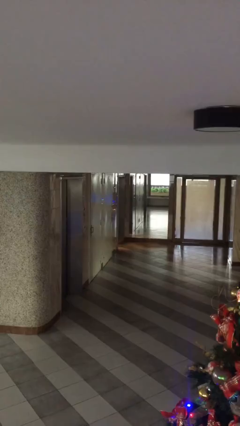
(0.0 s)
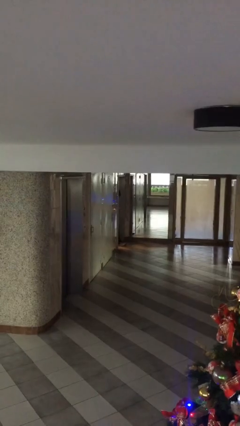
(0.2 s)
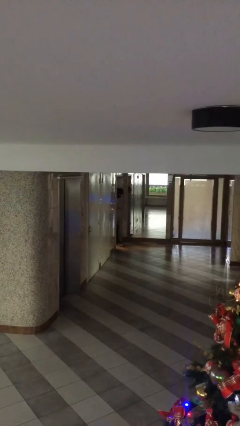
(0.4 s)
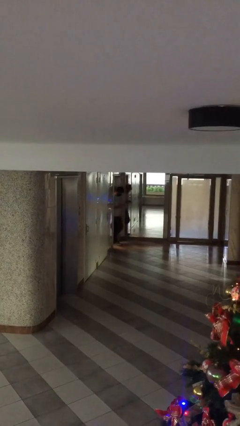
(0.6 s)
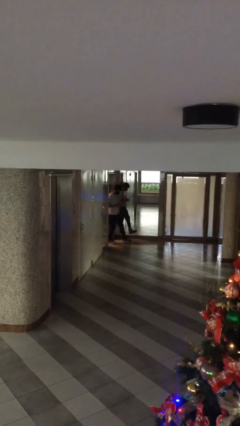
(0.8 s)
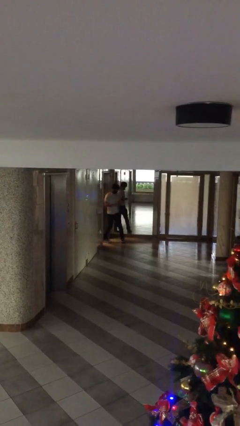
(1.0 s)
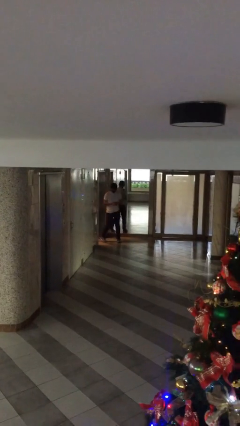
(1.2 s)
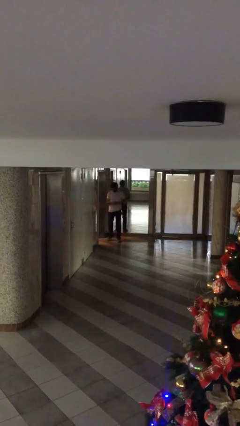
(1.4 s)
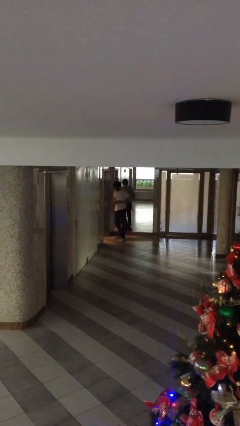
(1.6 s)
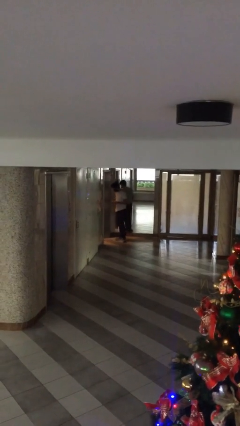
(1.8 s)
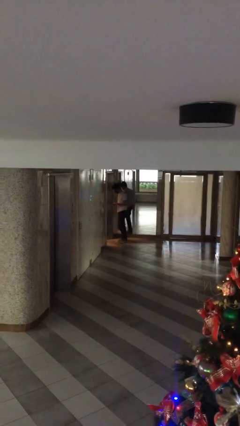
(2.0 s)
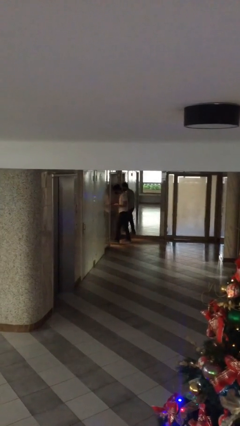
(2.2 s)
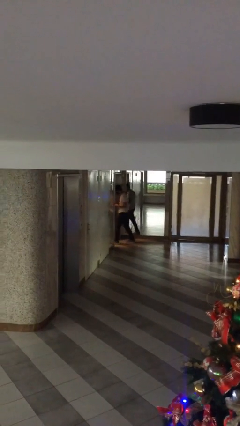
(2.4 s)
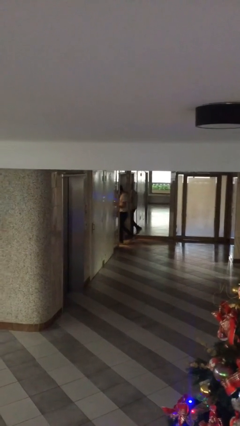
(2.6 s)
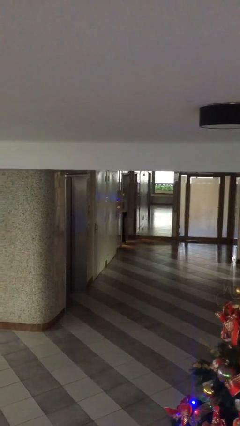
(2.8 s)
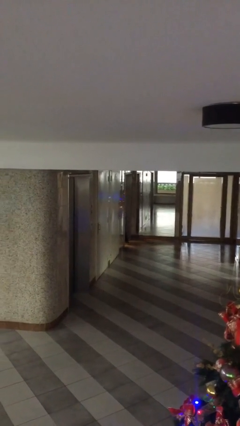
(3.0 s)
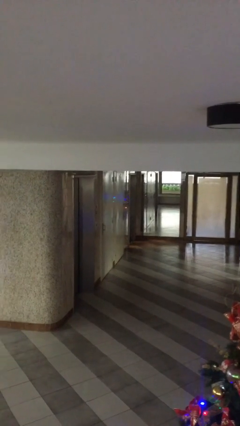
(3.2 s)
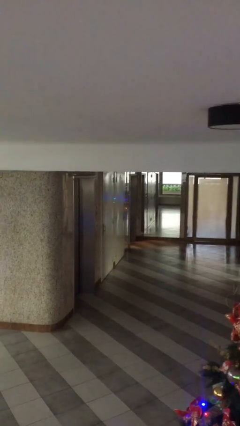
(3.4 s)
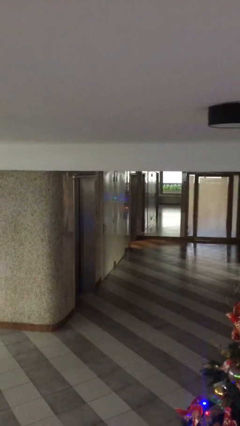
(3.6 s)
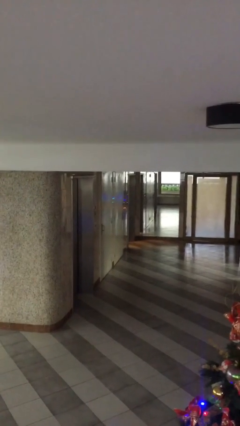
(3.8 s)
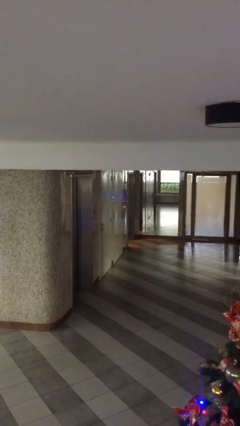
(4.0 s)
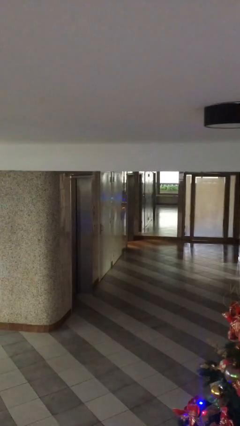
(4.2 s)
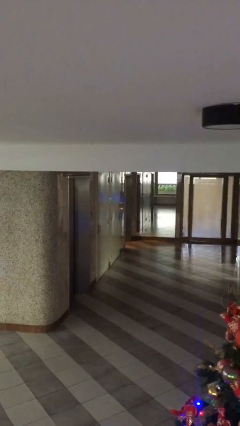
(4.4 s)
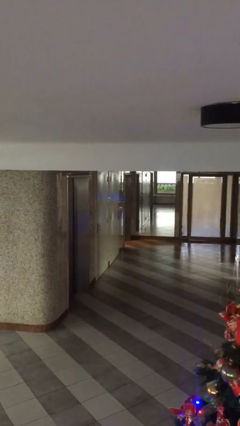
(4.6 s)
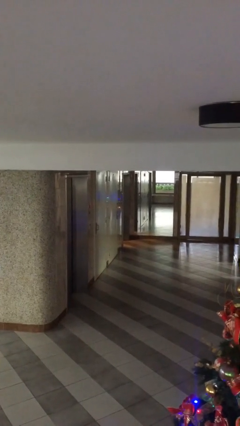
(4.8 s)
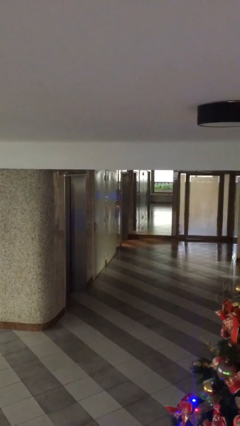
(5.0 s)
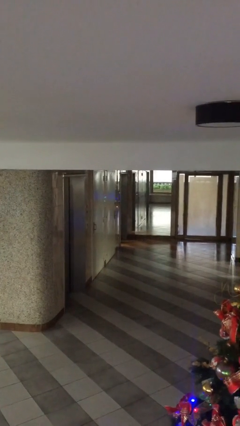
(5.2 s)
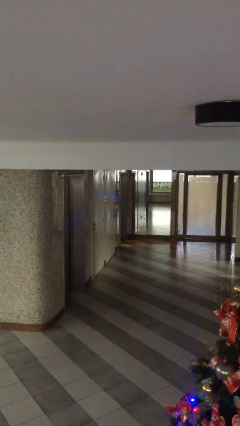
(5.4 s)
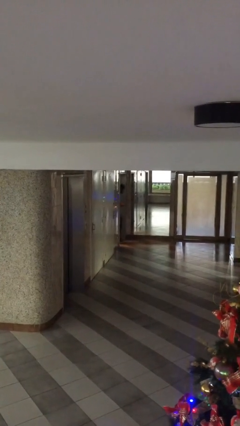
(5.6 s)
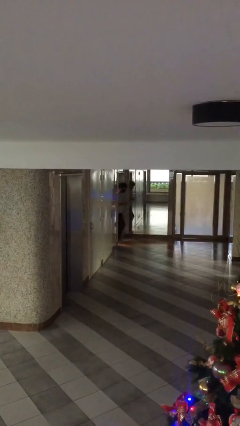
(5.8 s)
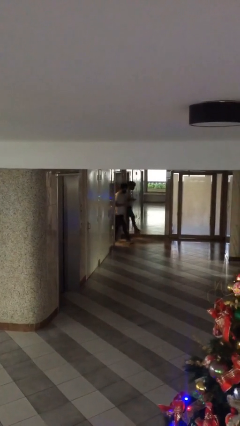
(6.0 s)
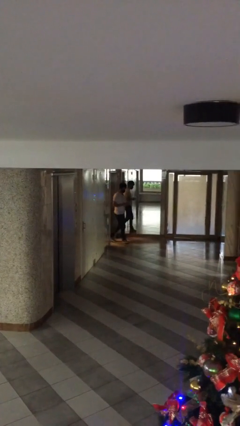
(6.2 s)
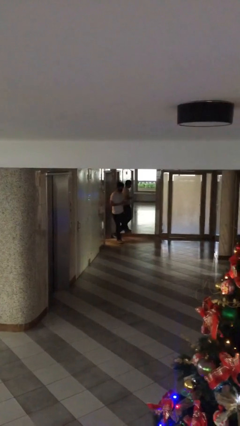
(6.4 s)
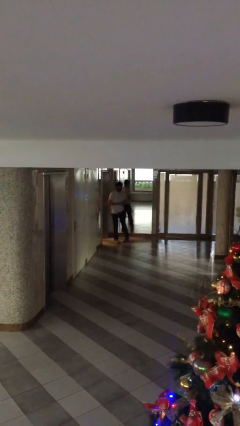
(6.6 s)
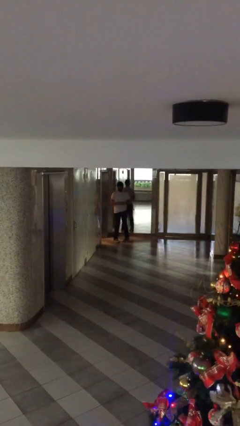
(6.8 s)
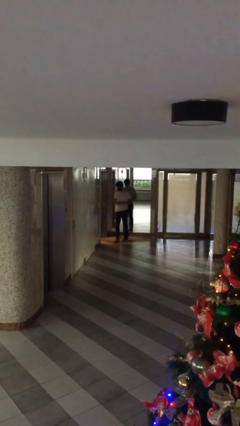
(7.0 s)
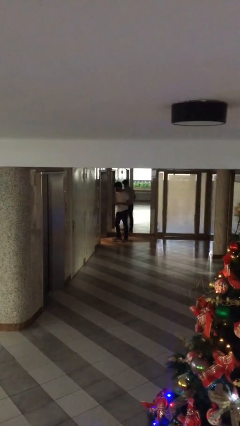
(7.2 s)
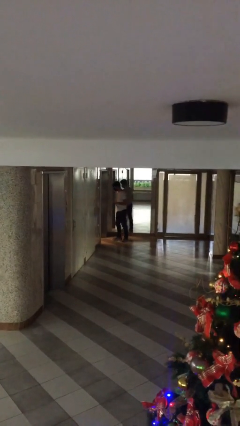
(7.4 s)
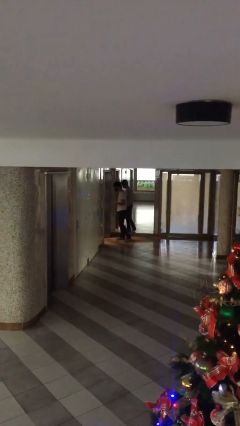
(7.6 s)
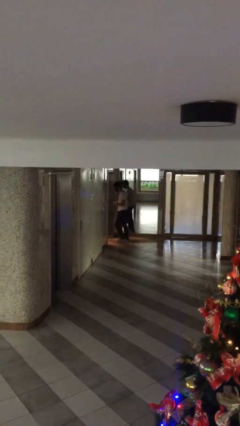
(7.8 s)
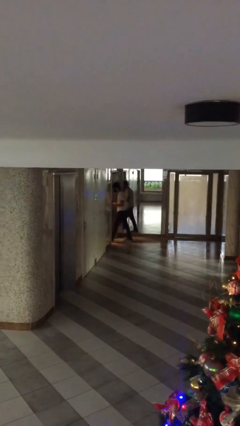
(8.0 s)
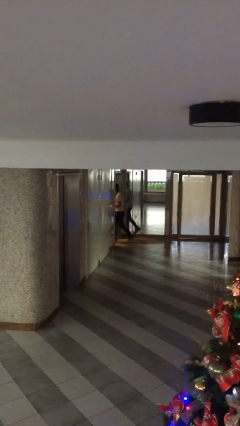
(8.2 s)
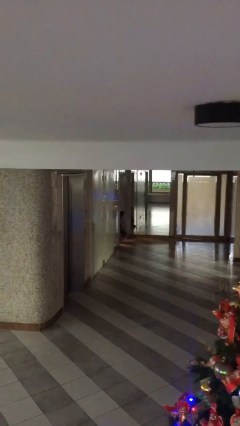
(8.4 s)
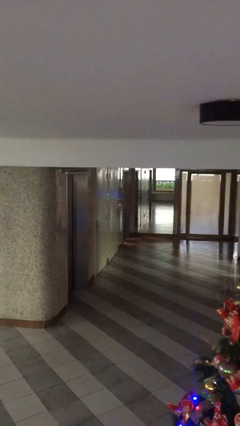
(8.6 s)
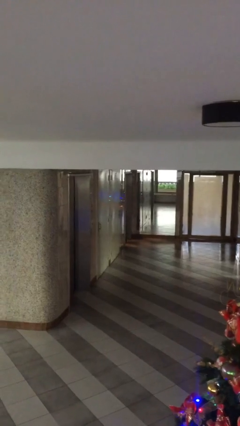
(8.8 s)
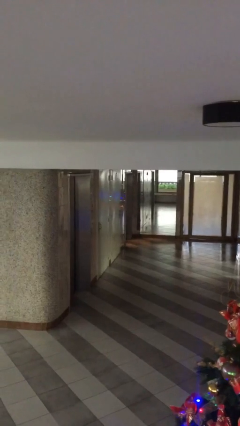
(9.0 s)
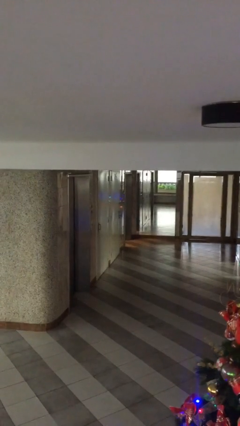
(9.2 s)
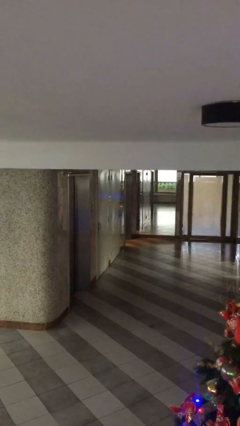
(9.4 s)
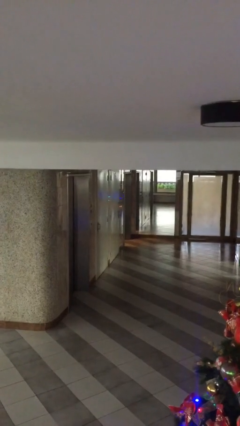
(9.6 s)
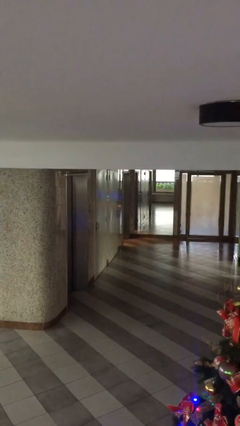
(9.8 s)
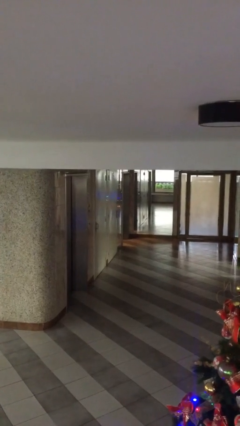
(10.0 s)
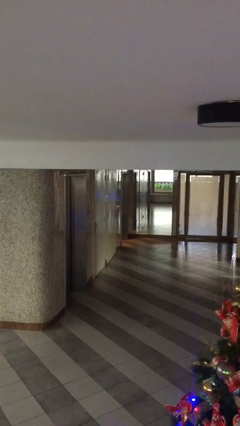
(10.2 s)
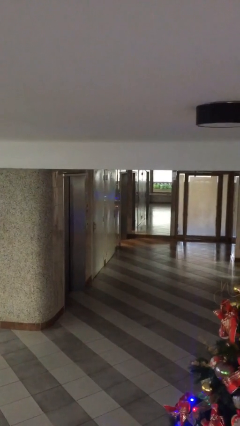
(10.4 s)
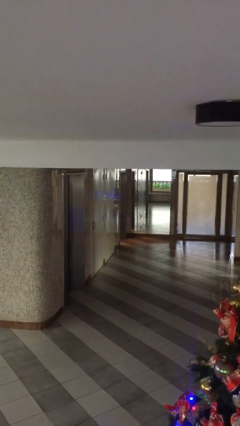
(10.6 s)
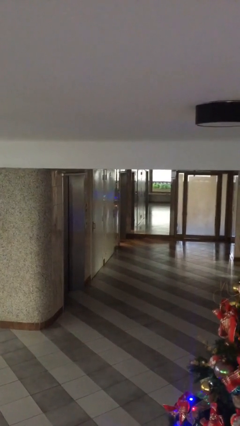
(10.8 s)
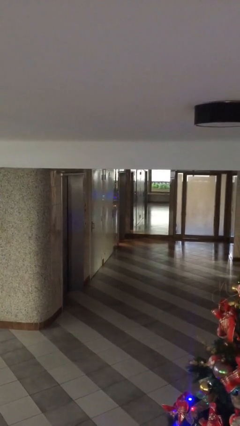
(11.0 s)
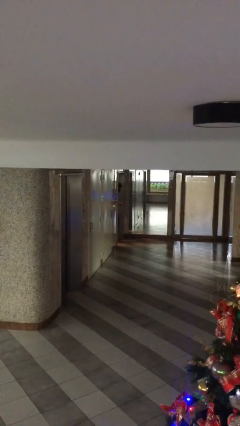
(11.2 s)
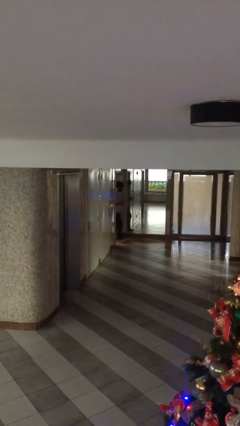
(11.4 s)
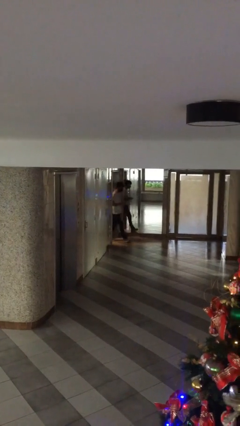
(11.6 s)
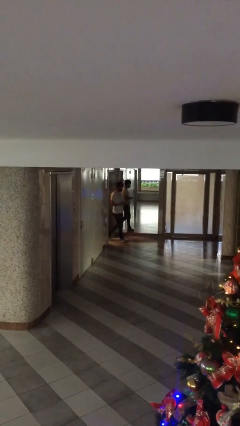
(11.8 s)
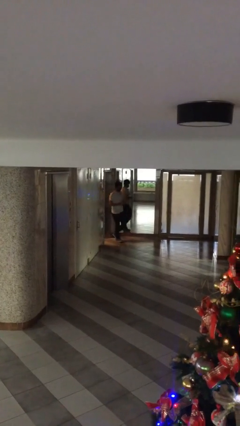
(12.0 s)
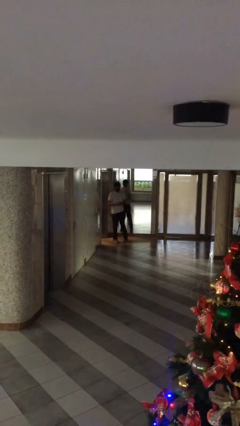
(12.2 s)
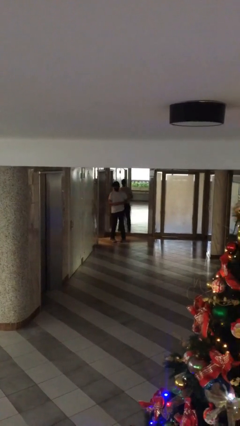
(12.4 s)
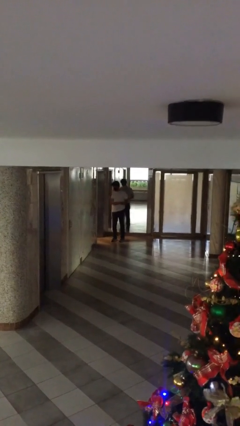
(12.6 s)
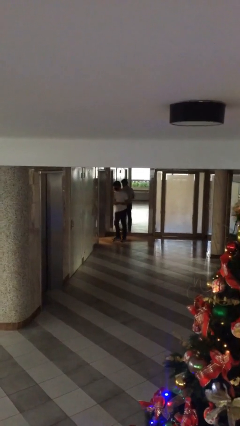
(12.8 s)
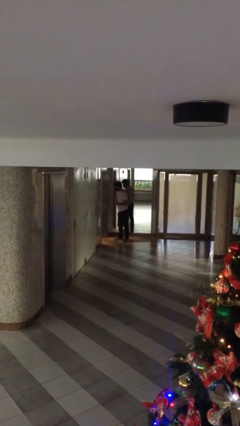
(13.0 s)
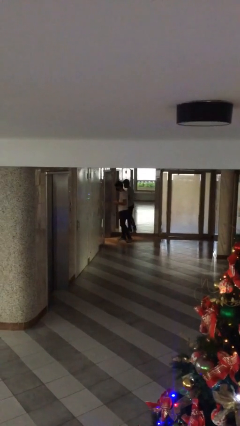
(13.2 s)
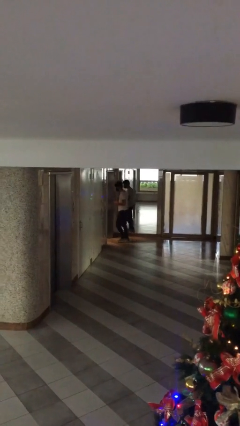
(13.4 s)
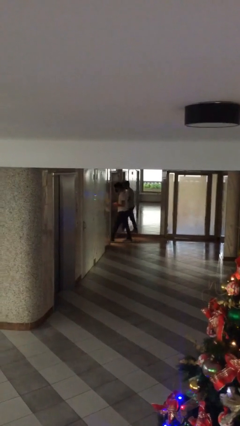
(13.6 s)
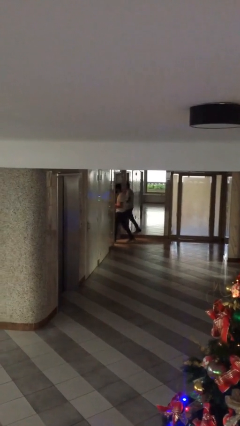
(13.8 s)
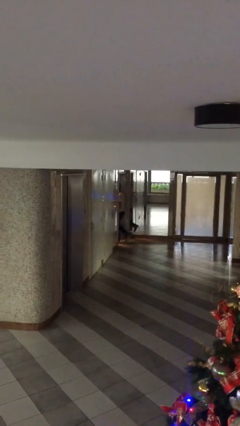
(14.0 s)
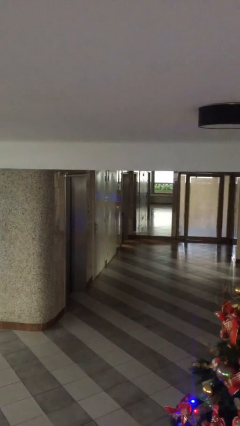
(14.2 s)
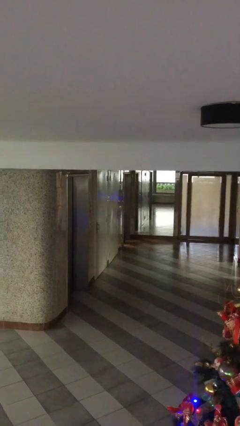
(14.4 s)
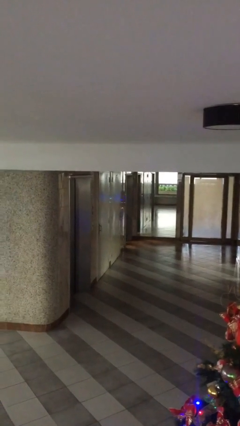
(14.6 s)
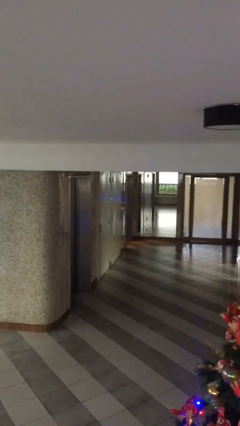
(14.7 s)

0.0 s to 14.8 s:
person texts on phone

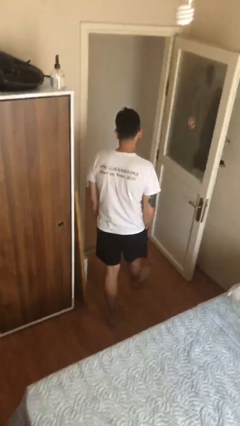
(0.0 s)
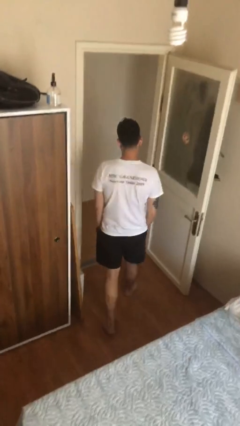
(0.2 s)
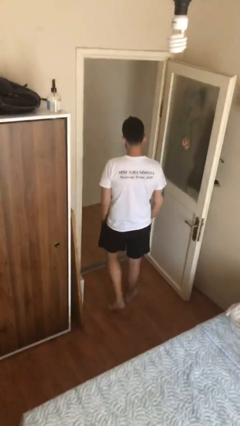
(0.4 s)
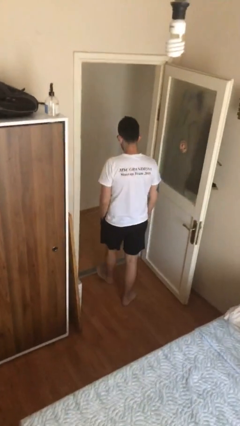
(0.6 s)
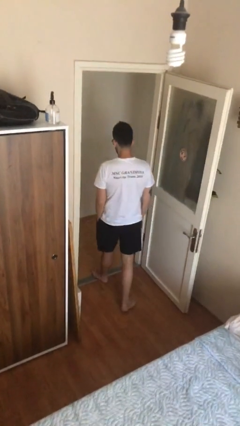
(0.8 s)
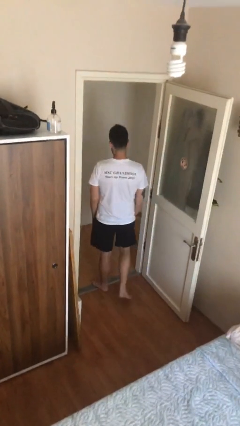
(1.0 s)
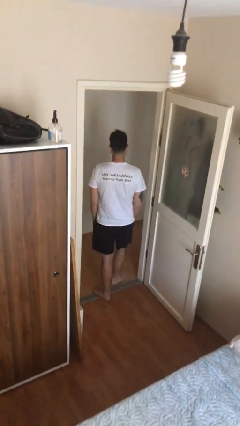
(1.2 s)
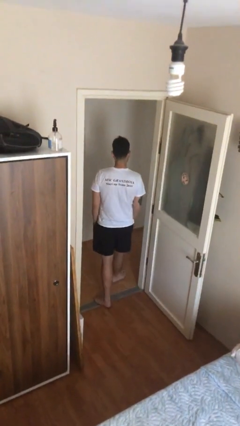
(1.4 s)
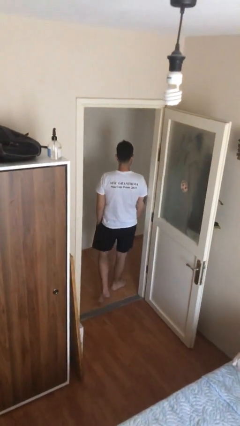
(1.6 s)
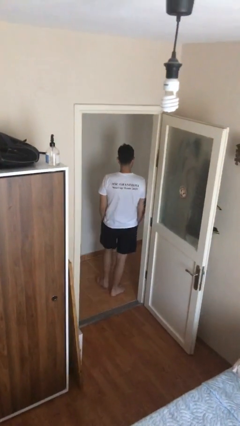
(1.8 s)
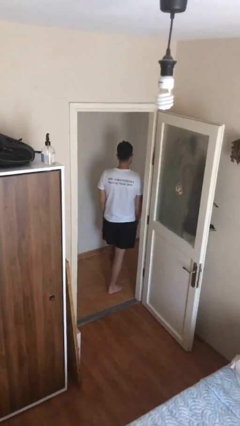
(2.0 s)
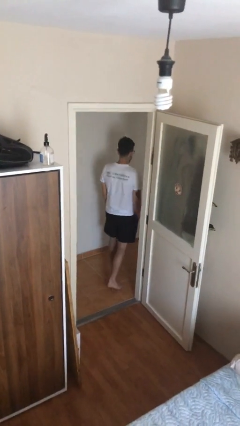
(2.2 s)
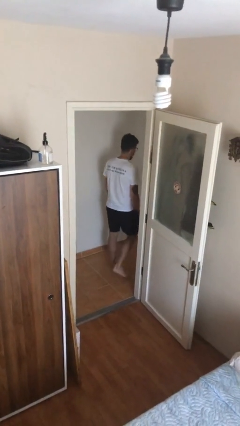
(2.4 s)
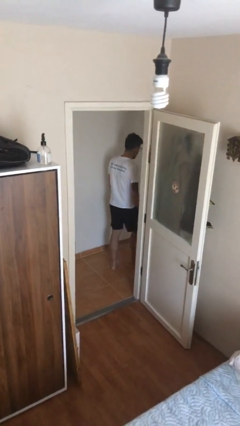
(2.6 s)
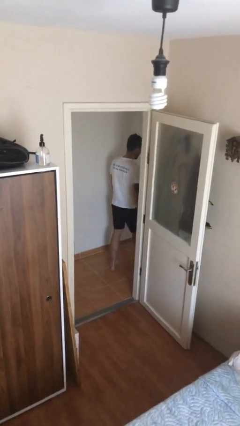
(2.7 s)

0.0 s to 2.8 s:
person exits scene through structure

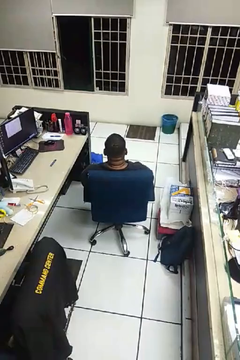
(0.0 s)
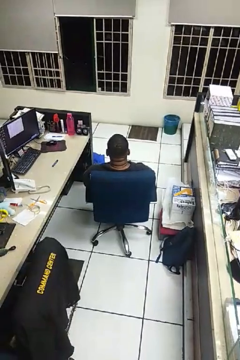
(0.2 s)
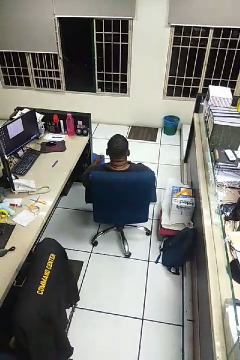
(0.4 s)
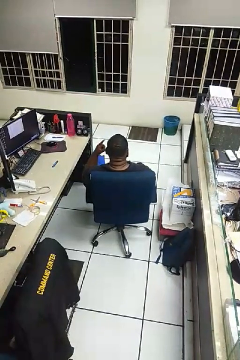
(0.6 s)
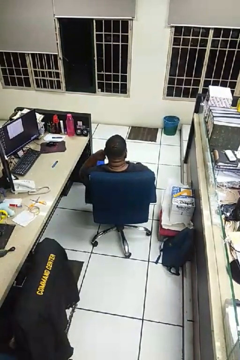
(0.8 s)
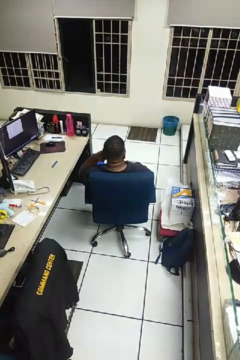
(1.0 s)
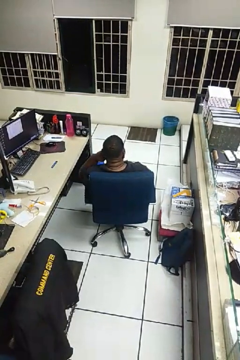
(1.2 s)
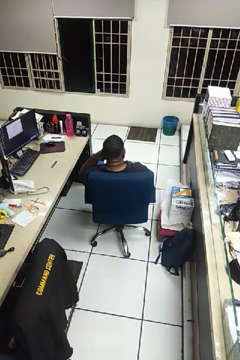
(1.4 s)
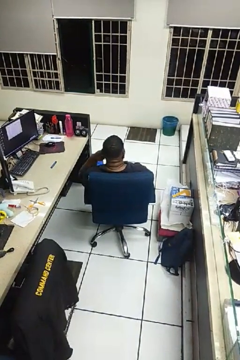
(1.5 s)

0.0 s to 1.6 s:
person gestures listen closely
